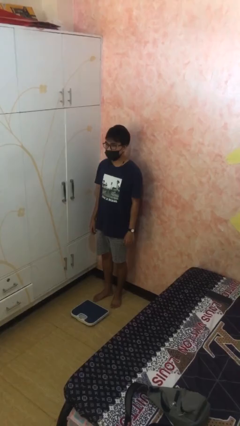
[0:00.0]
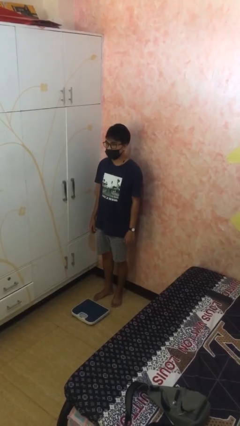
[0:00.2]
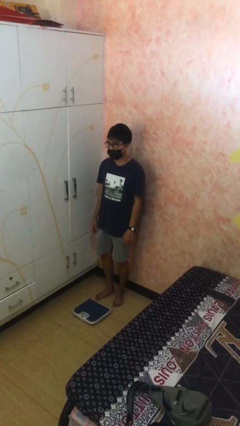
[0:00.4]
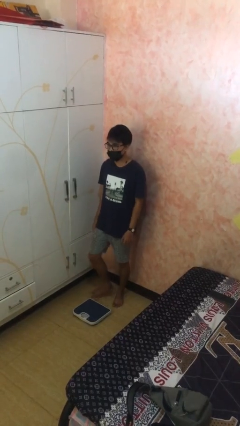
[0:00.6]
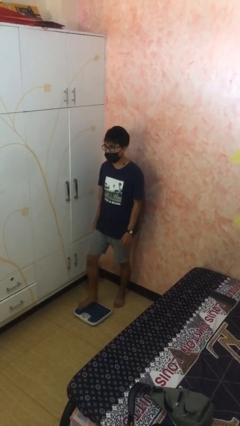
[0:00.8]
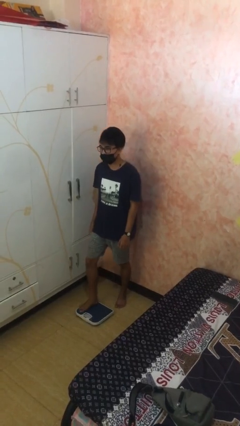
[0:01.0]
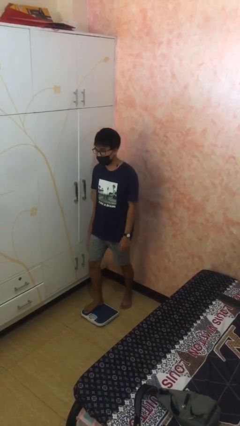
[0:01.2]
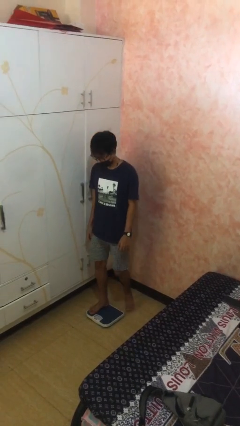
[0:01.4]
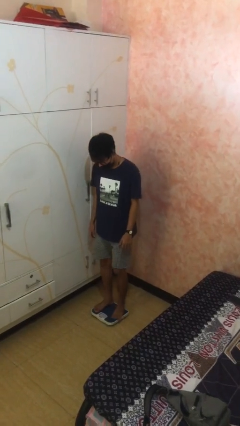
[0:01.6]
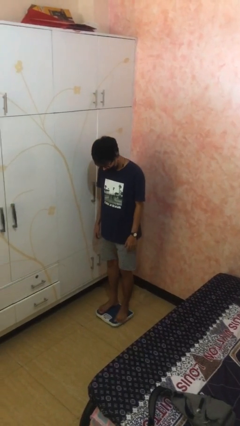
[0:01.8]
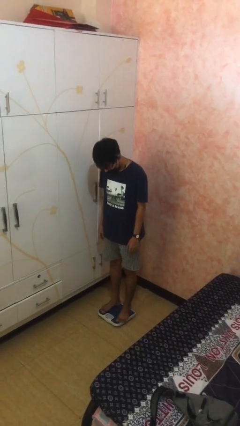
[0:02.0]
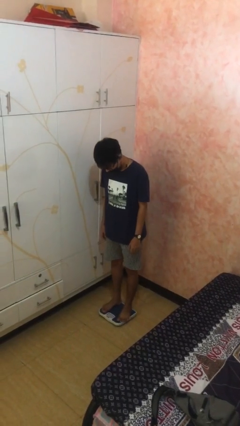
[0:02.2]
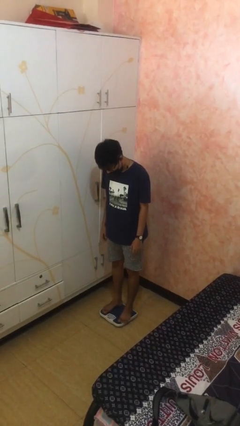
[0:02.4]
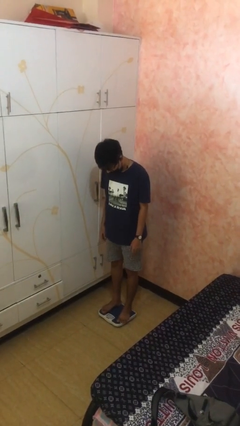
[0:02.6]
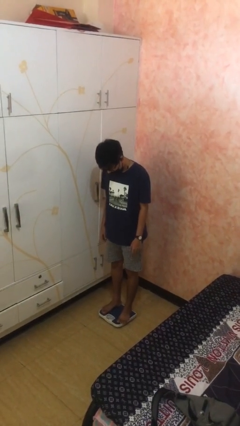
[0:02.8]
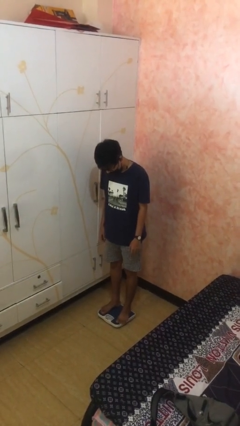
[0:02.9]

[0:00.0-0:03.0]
person uses bodyweight scale

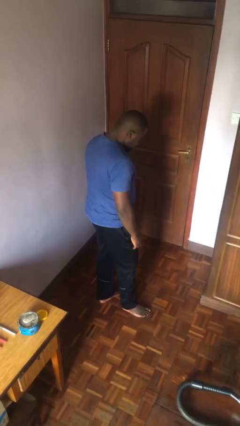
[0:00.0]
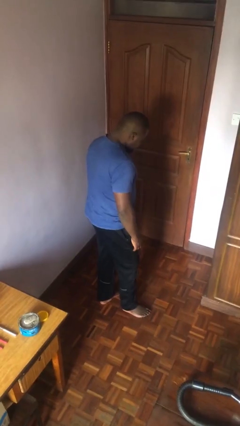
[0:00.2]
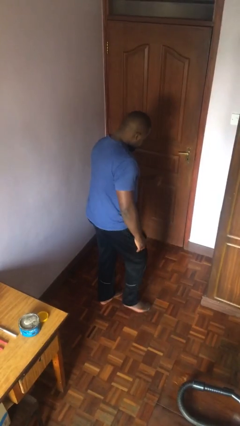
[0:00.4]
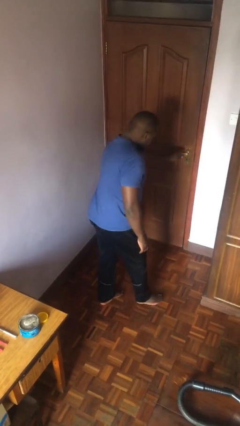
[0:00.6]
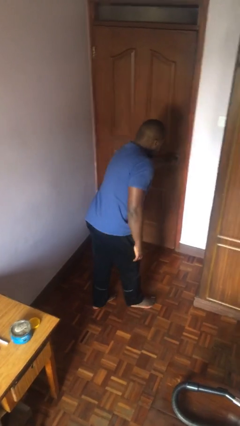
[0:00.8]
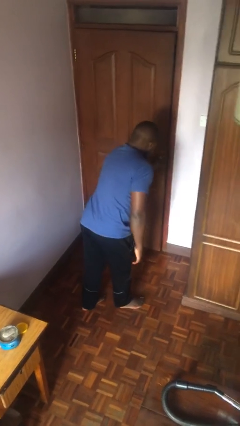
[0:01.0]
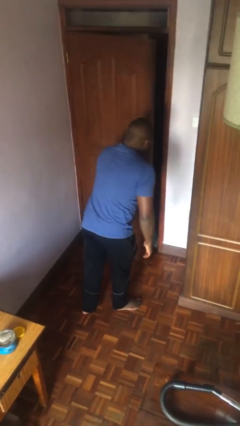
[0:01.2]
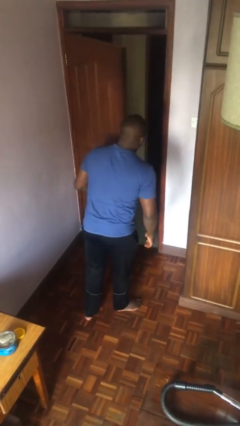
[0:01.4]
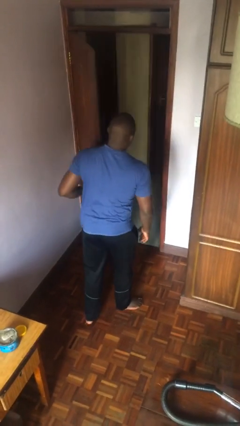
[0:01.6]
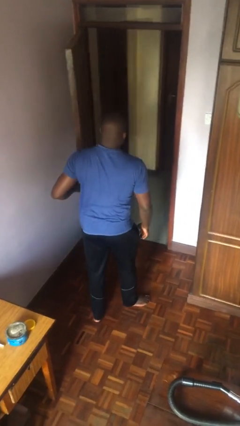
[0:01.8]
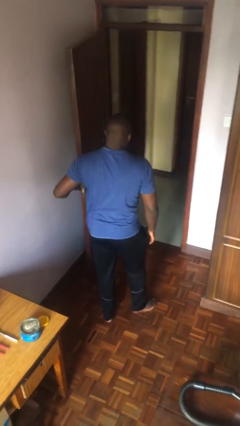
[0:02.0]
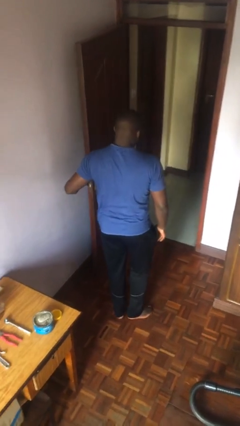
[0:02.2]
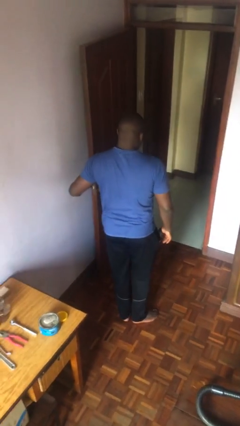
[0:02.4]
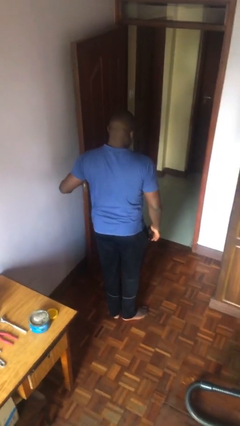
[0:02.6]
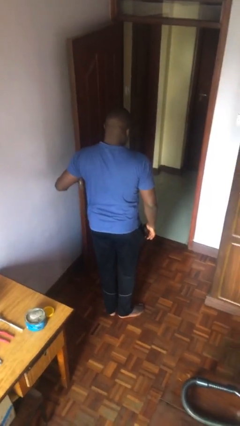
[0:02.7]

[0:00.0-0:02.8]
person opens facility door

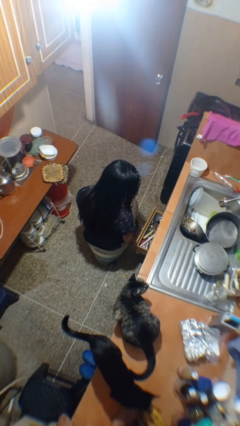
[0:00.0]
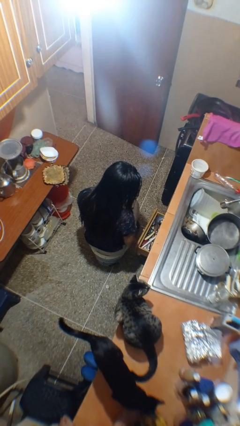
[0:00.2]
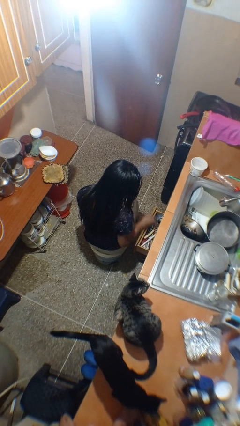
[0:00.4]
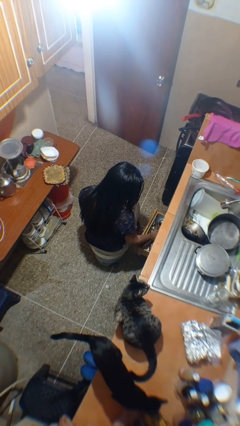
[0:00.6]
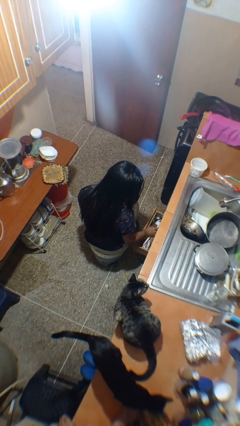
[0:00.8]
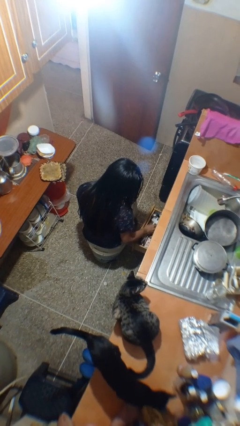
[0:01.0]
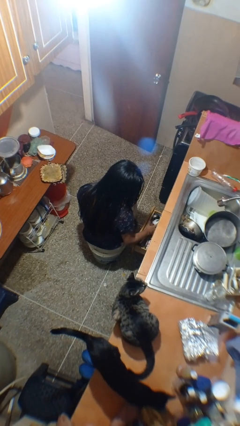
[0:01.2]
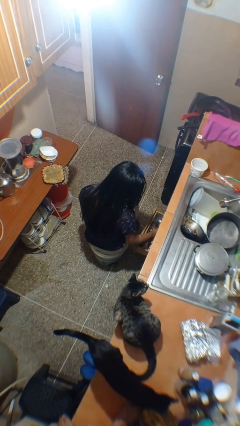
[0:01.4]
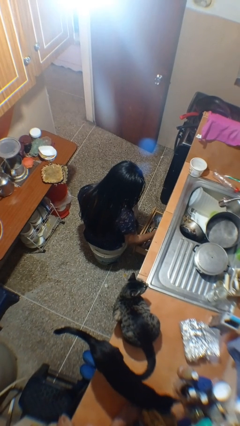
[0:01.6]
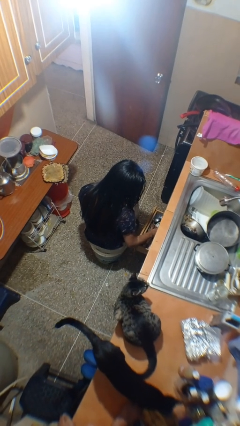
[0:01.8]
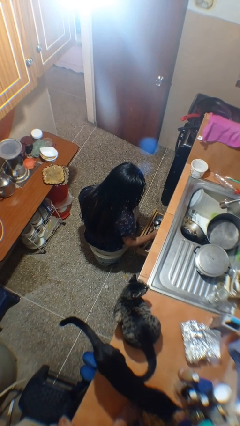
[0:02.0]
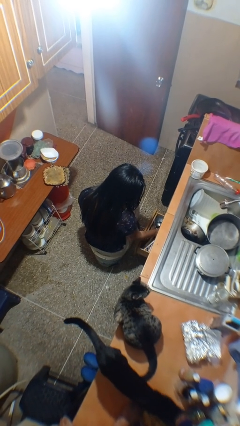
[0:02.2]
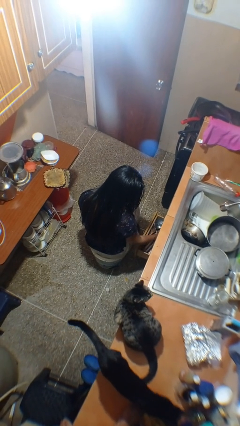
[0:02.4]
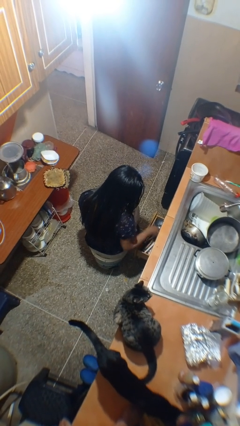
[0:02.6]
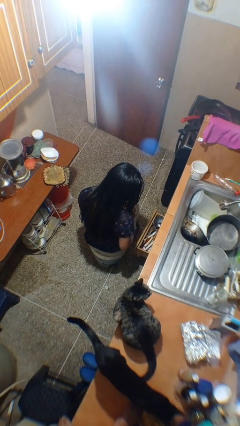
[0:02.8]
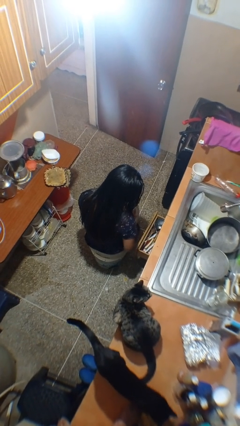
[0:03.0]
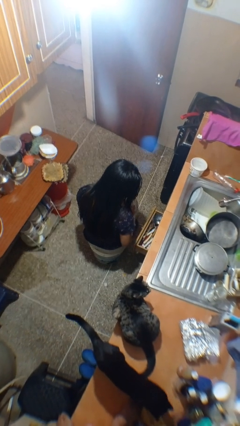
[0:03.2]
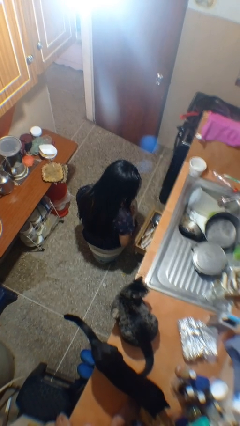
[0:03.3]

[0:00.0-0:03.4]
person searches in kitchen drawer

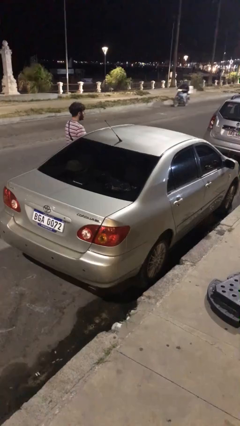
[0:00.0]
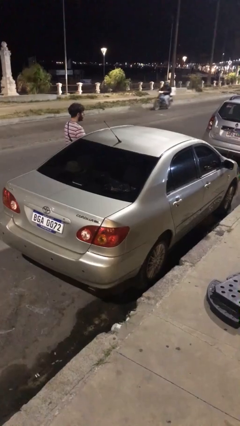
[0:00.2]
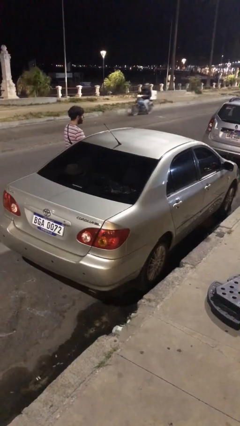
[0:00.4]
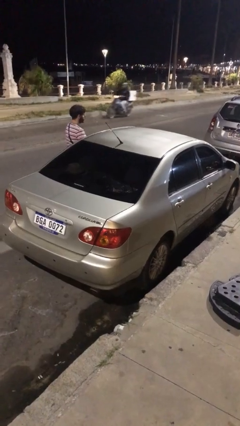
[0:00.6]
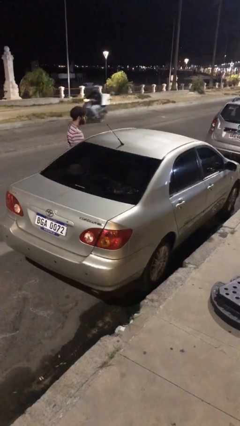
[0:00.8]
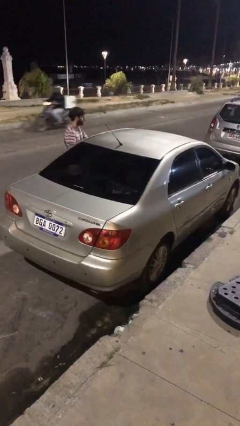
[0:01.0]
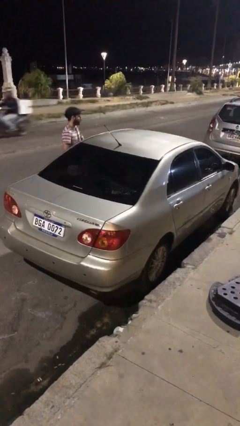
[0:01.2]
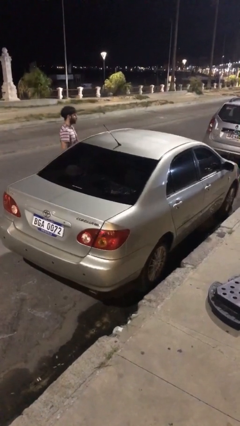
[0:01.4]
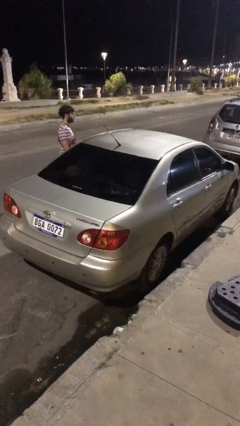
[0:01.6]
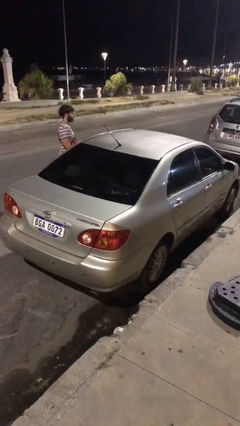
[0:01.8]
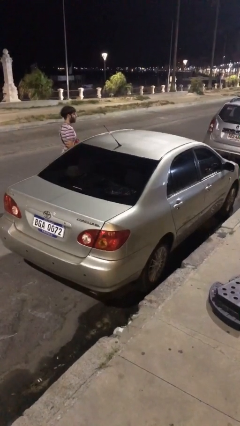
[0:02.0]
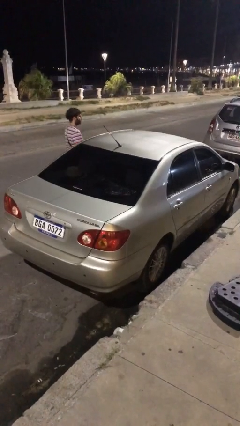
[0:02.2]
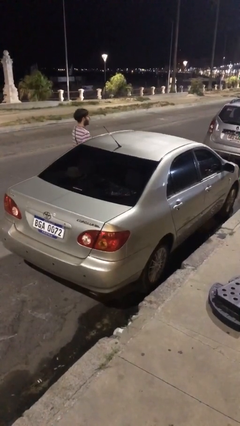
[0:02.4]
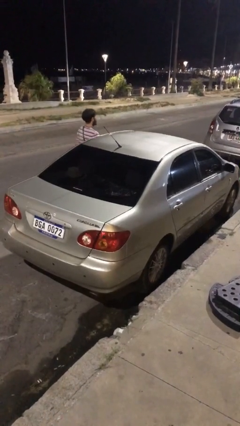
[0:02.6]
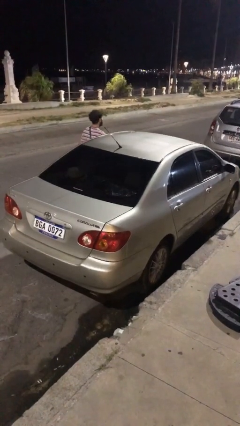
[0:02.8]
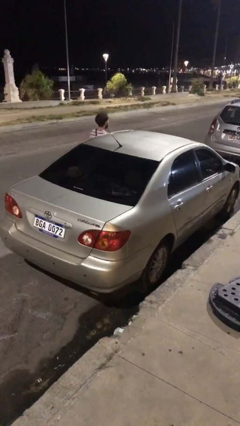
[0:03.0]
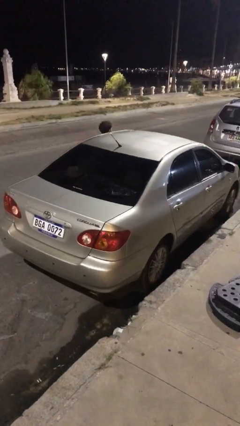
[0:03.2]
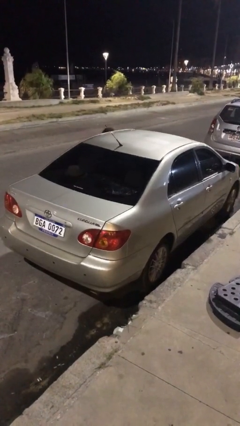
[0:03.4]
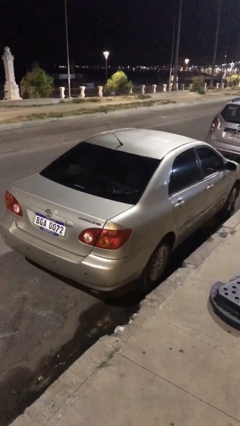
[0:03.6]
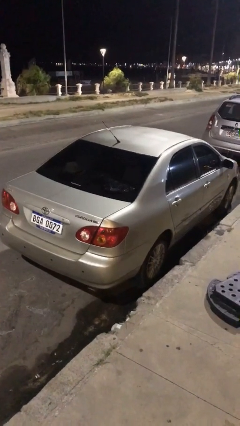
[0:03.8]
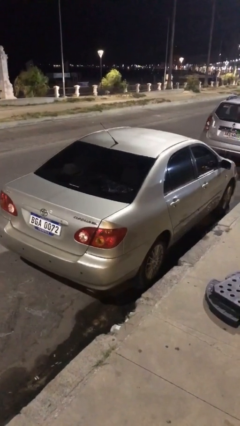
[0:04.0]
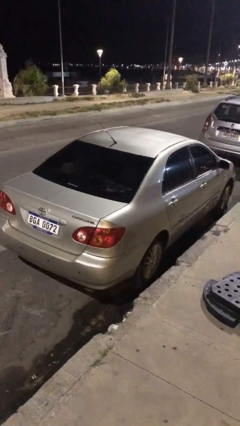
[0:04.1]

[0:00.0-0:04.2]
car picks up person

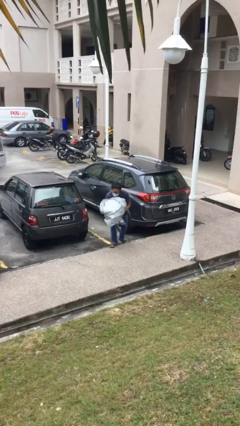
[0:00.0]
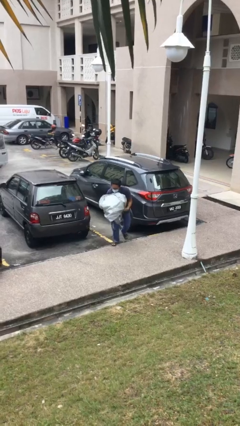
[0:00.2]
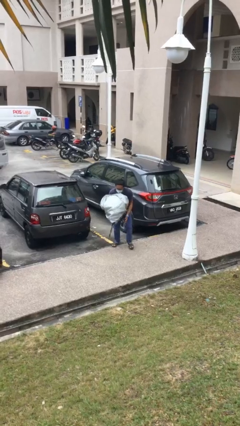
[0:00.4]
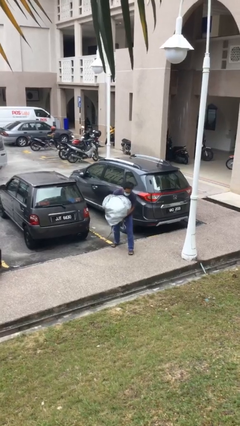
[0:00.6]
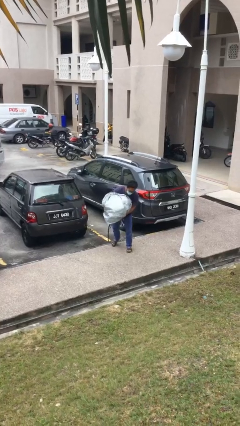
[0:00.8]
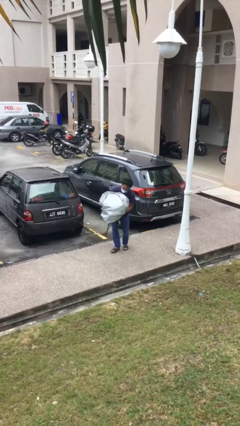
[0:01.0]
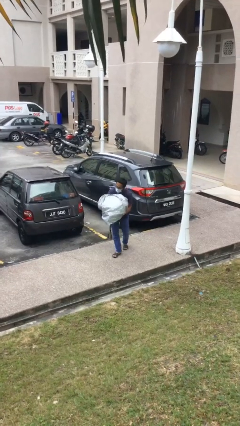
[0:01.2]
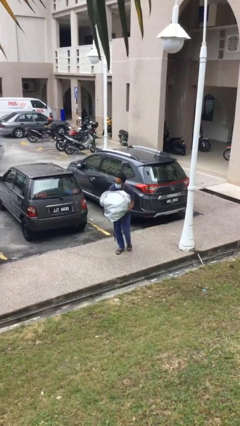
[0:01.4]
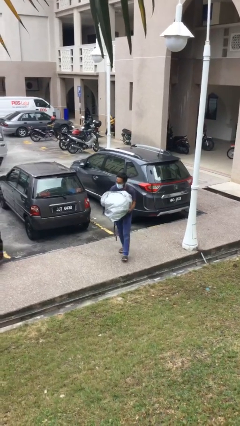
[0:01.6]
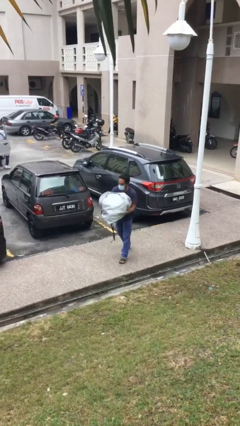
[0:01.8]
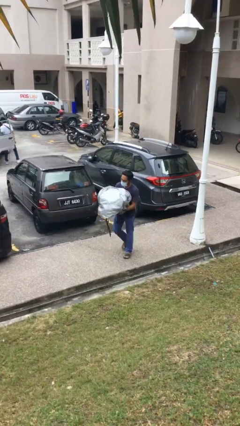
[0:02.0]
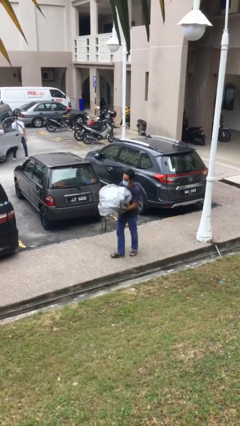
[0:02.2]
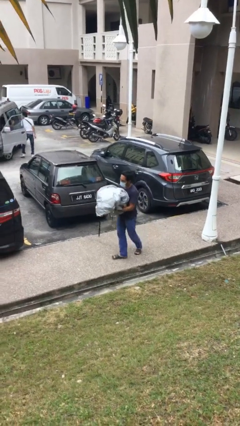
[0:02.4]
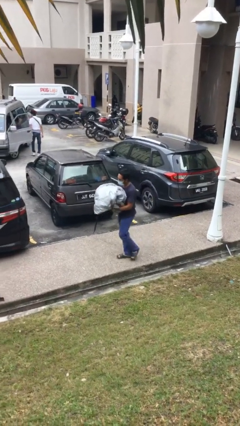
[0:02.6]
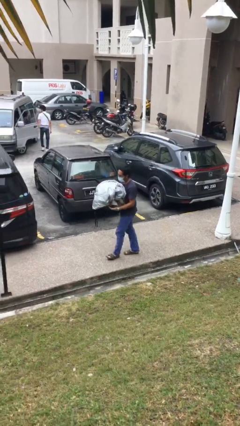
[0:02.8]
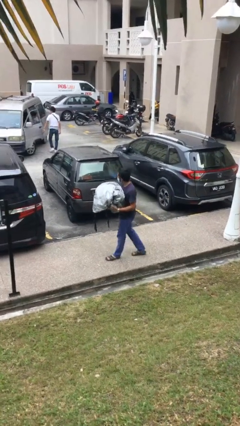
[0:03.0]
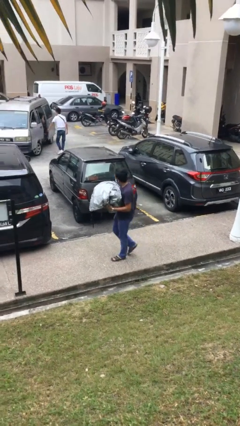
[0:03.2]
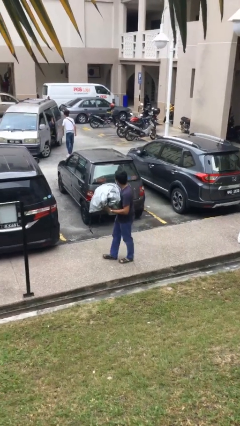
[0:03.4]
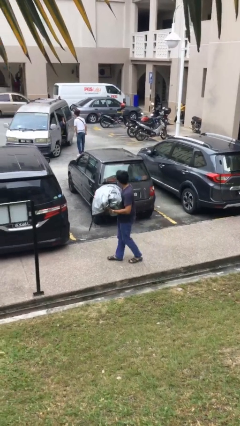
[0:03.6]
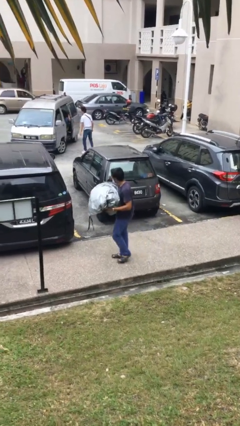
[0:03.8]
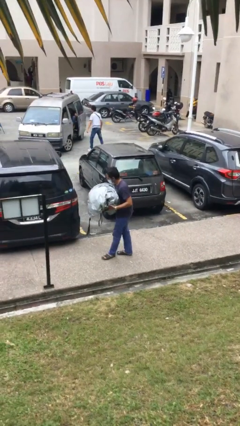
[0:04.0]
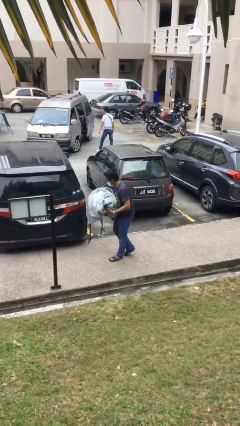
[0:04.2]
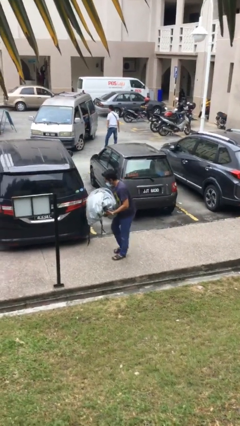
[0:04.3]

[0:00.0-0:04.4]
person carries heavy object
